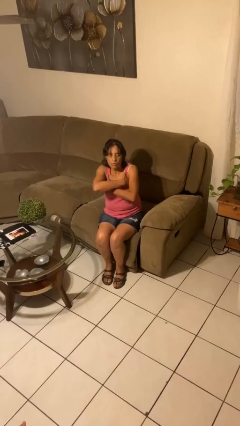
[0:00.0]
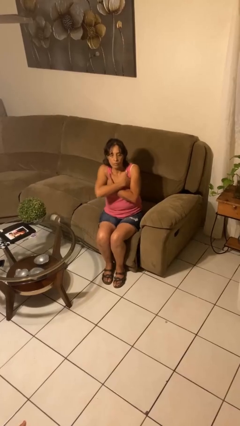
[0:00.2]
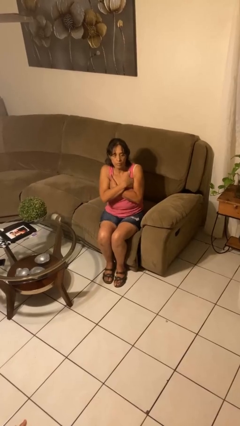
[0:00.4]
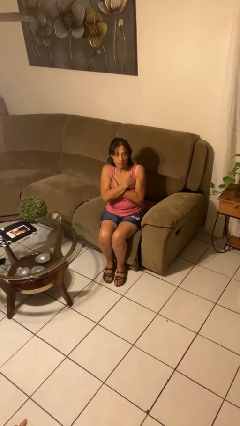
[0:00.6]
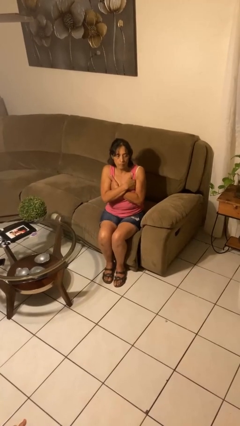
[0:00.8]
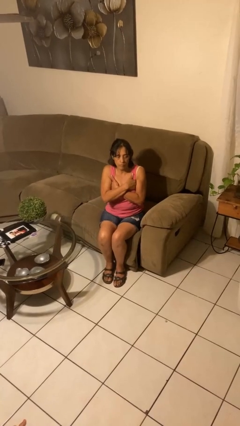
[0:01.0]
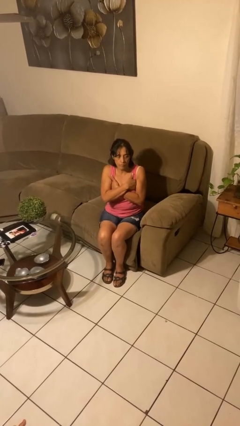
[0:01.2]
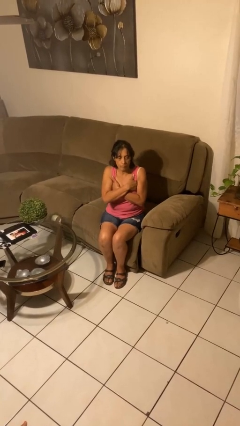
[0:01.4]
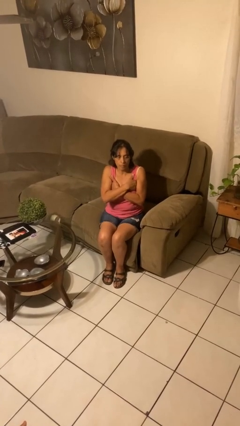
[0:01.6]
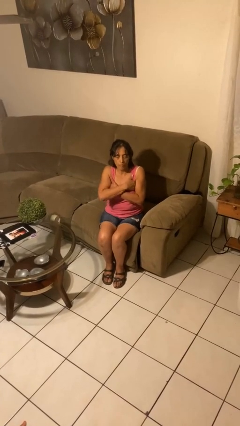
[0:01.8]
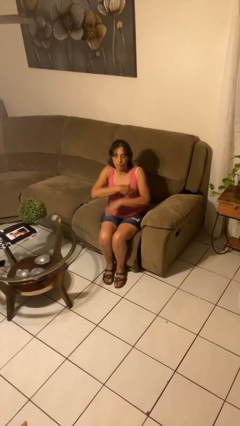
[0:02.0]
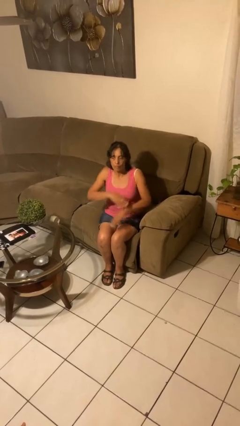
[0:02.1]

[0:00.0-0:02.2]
person gestures arms x

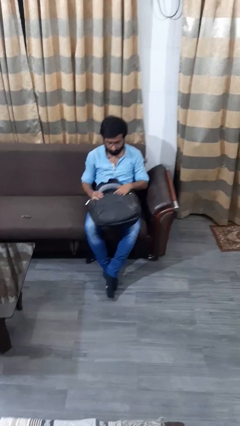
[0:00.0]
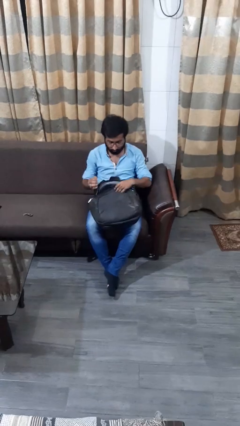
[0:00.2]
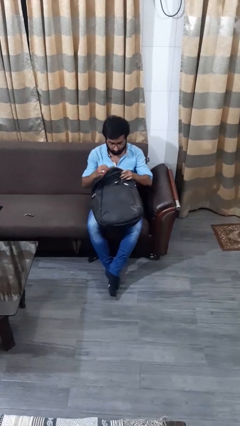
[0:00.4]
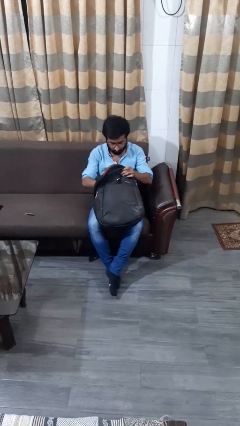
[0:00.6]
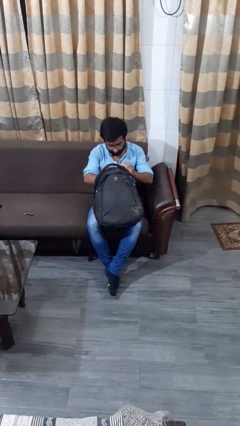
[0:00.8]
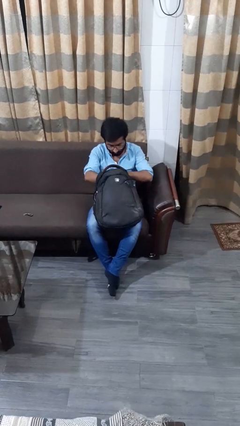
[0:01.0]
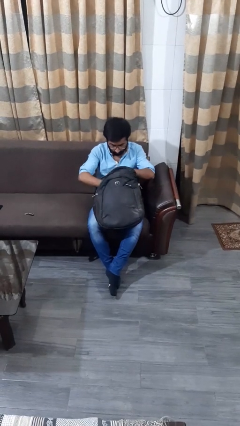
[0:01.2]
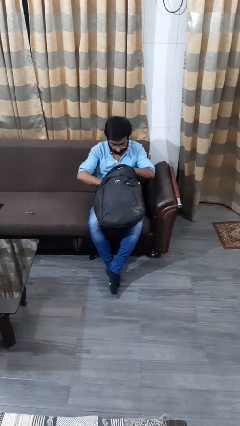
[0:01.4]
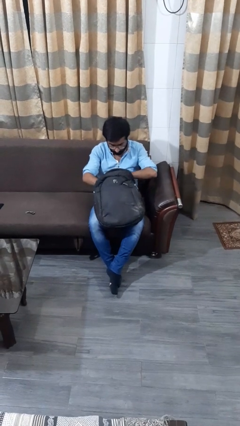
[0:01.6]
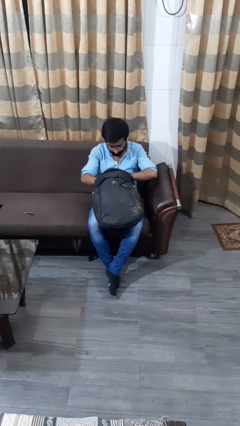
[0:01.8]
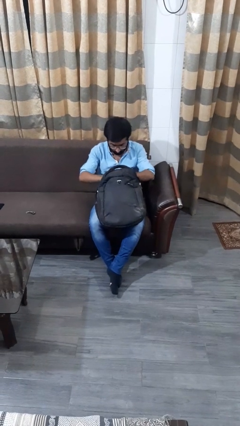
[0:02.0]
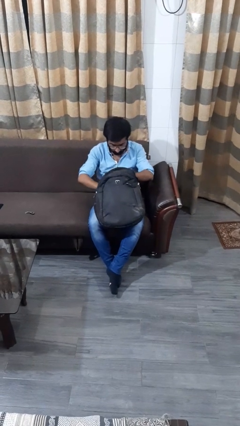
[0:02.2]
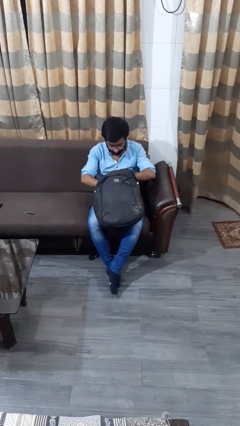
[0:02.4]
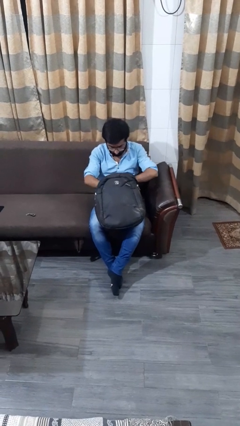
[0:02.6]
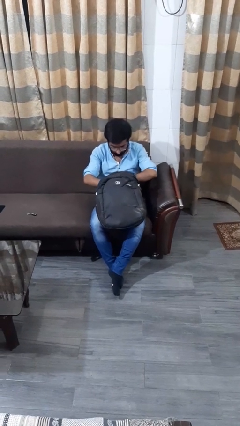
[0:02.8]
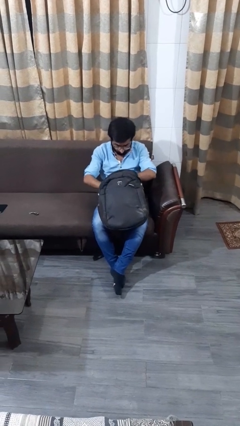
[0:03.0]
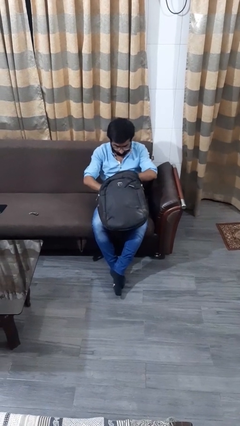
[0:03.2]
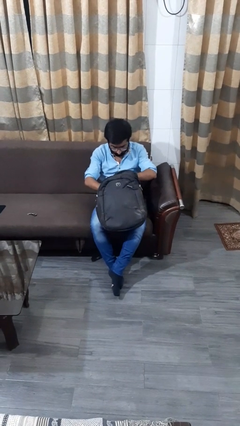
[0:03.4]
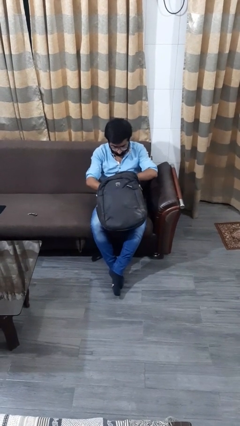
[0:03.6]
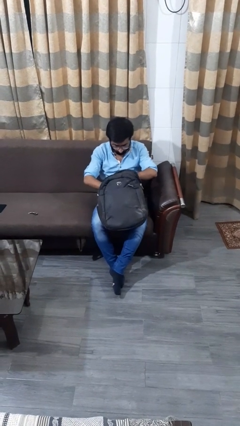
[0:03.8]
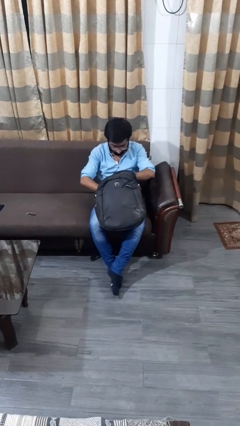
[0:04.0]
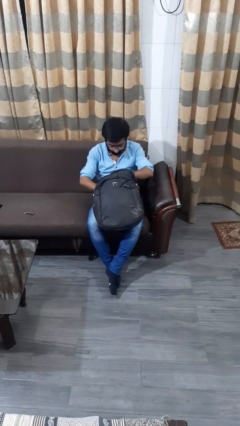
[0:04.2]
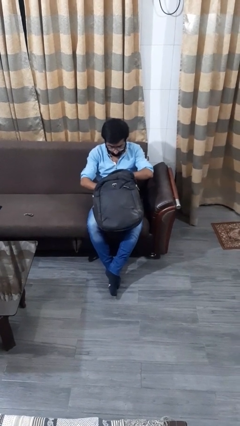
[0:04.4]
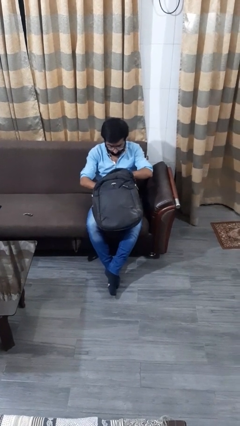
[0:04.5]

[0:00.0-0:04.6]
person searches in backpack

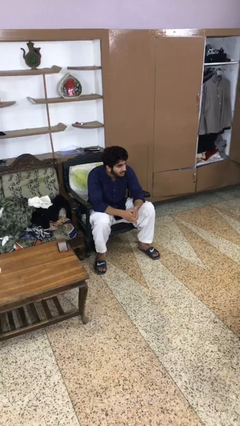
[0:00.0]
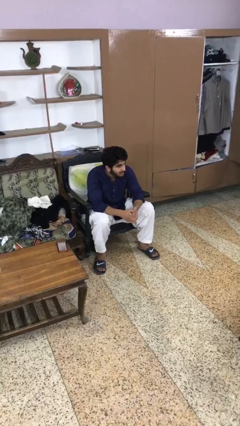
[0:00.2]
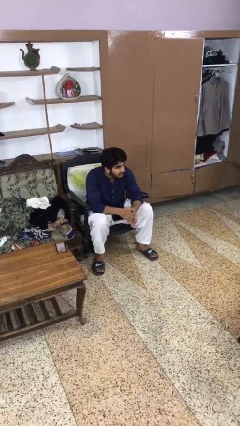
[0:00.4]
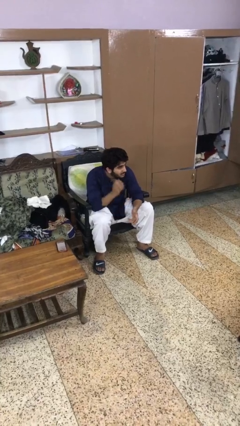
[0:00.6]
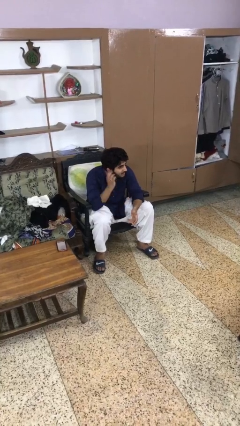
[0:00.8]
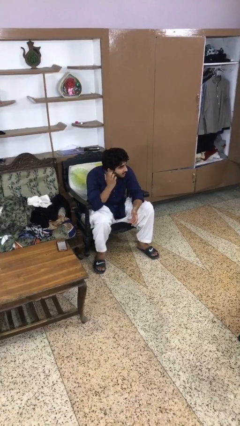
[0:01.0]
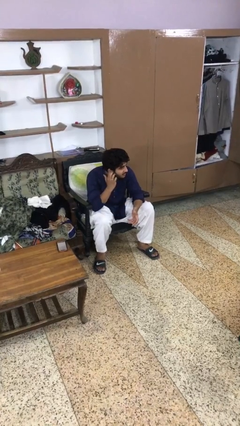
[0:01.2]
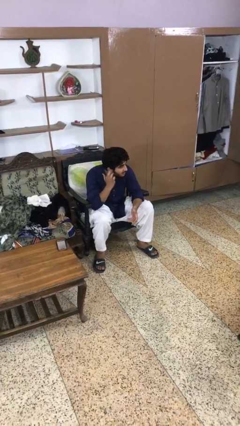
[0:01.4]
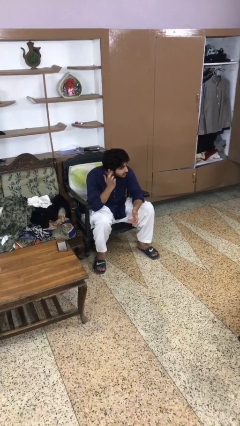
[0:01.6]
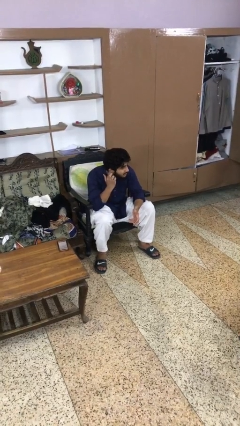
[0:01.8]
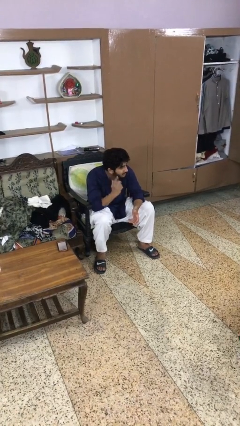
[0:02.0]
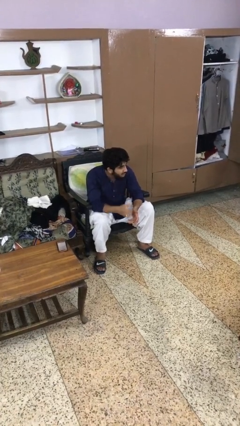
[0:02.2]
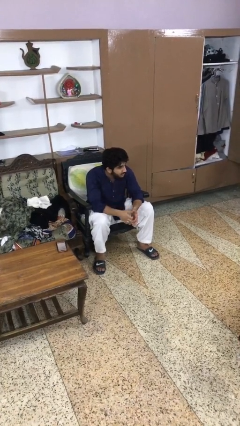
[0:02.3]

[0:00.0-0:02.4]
person puts fingers in ear

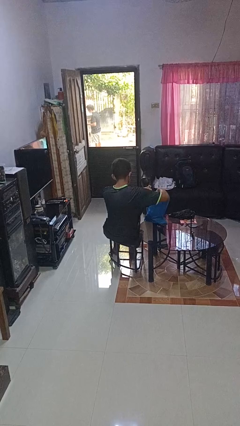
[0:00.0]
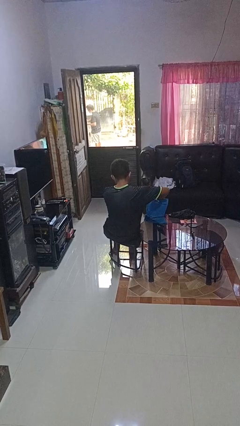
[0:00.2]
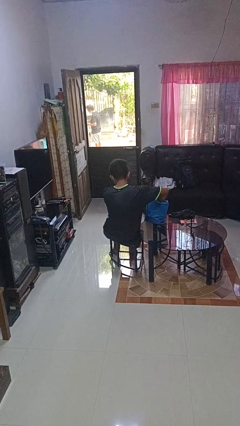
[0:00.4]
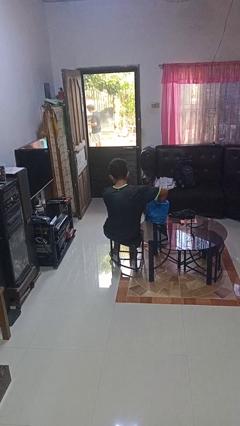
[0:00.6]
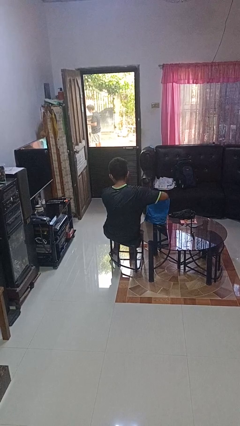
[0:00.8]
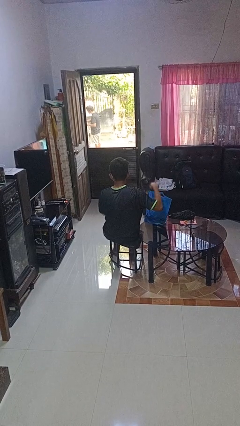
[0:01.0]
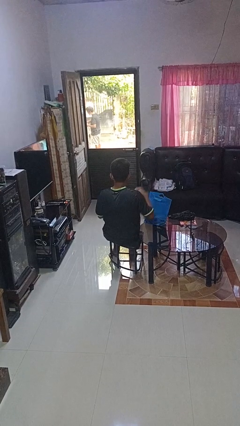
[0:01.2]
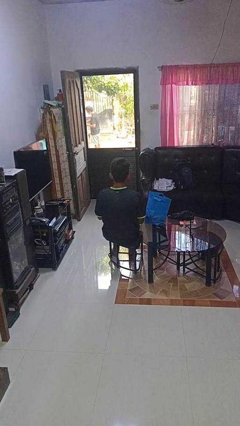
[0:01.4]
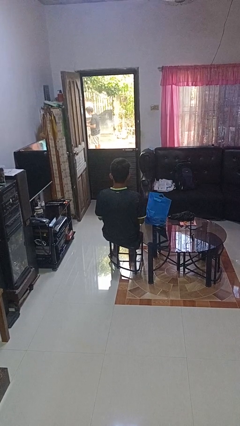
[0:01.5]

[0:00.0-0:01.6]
person puts object into bag

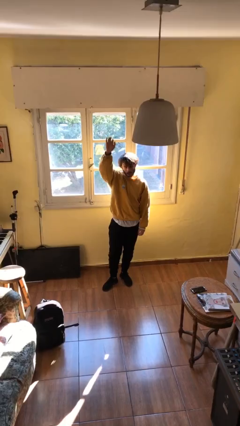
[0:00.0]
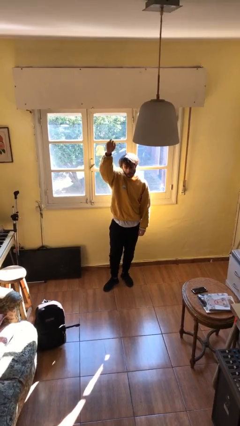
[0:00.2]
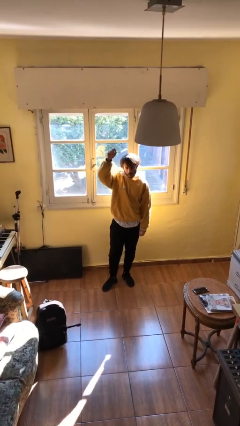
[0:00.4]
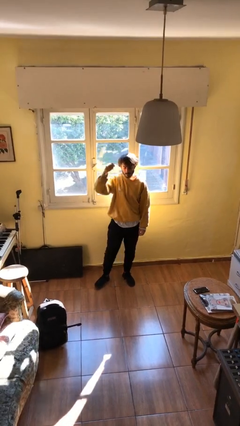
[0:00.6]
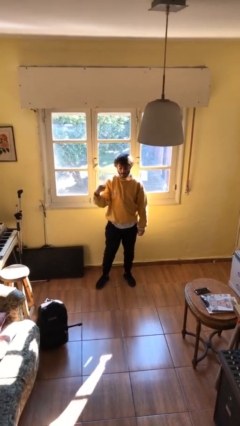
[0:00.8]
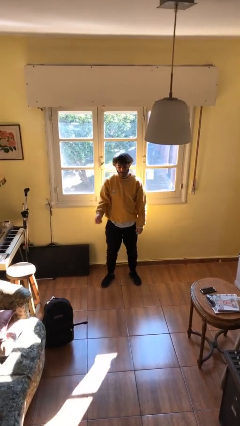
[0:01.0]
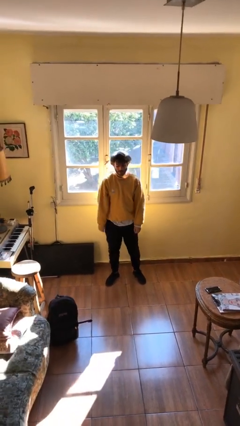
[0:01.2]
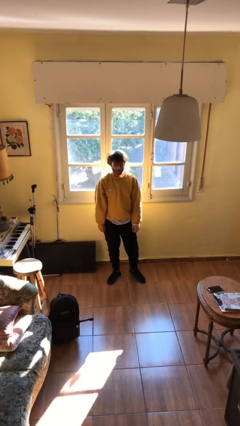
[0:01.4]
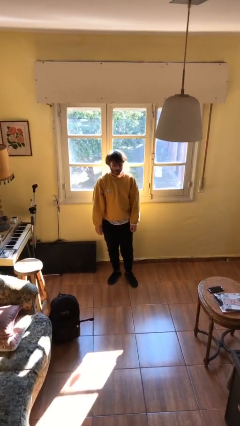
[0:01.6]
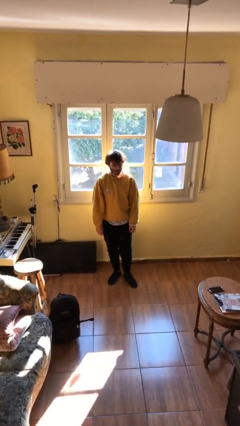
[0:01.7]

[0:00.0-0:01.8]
person gestures lower hand

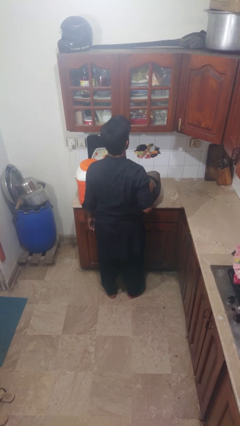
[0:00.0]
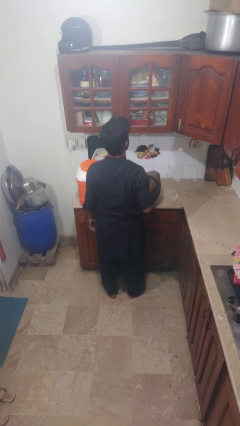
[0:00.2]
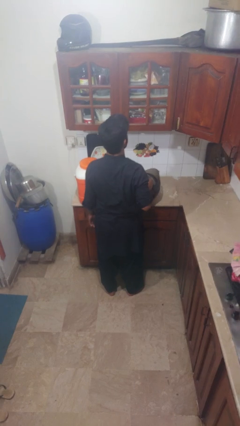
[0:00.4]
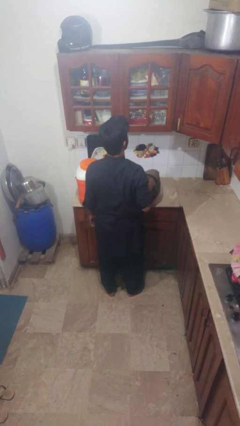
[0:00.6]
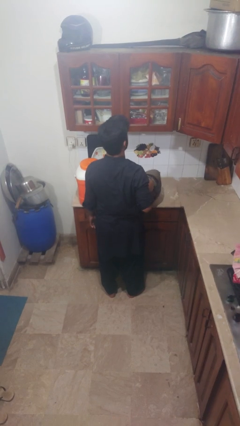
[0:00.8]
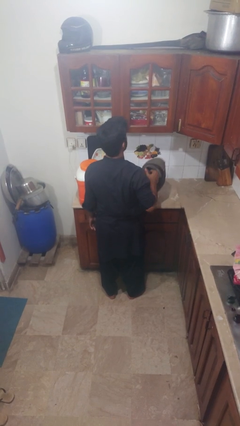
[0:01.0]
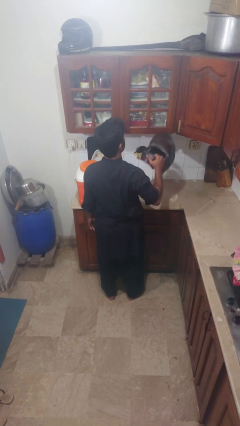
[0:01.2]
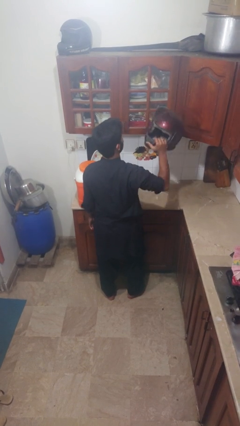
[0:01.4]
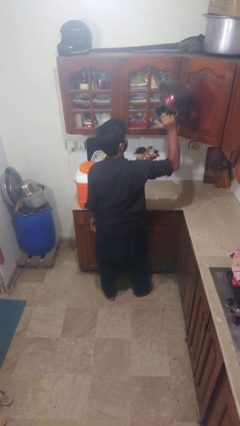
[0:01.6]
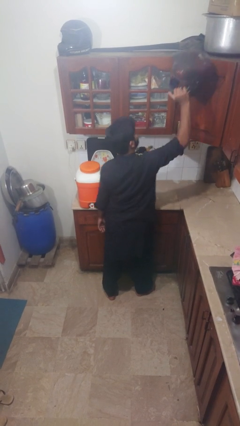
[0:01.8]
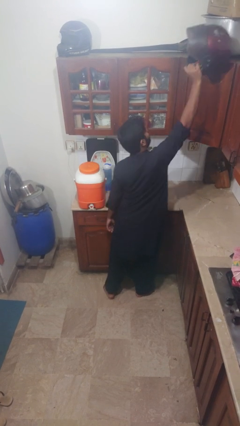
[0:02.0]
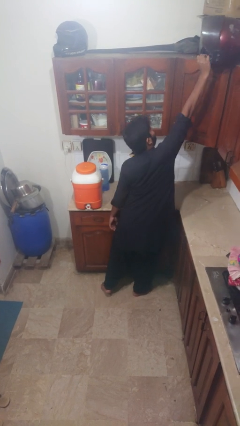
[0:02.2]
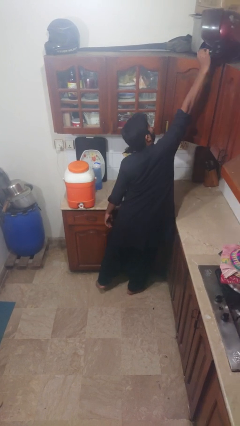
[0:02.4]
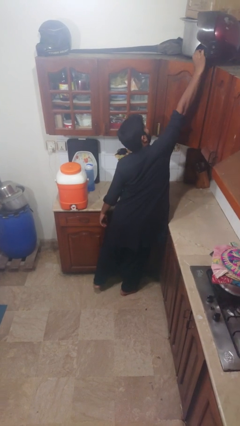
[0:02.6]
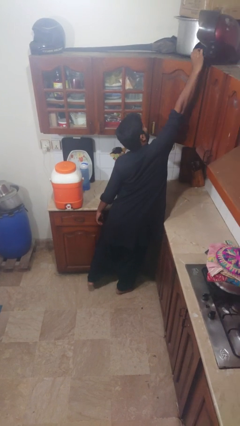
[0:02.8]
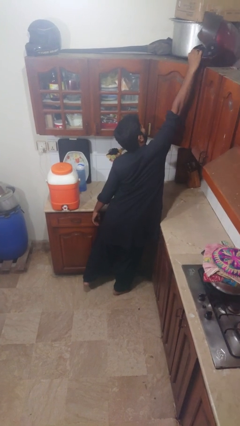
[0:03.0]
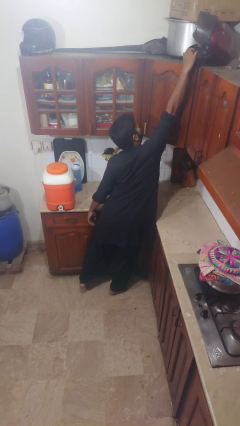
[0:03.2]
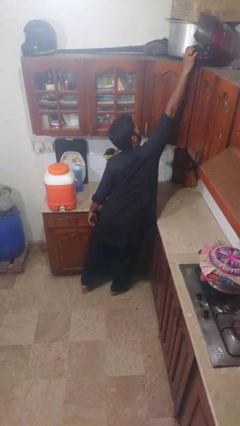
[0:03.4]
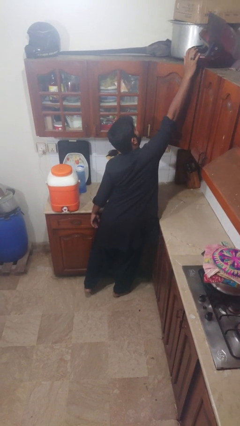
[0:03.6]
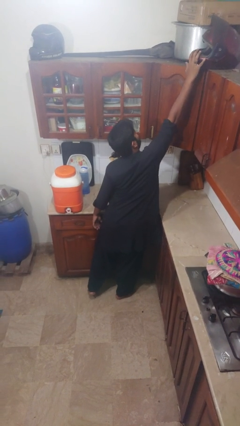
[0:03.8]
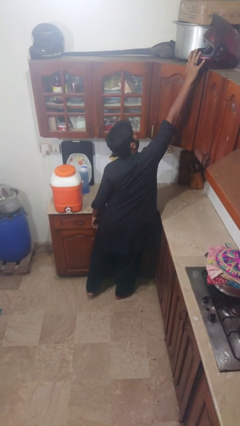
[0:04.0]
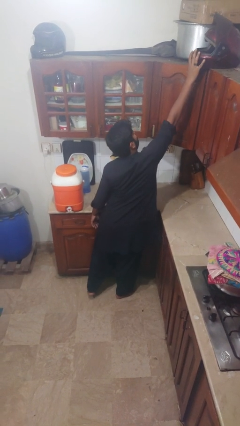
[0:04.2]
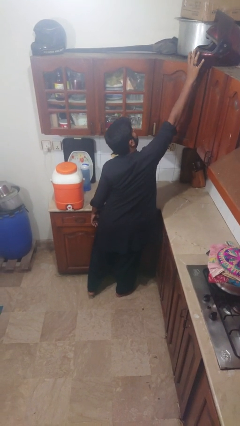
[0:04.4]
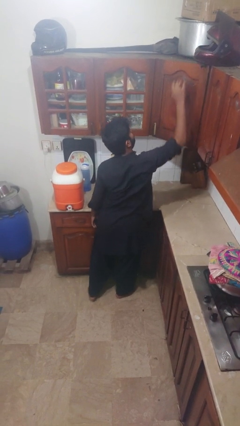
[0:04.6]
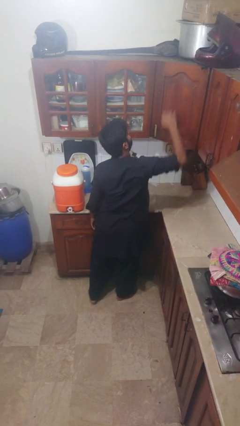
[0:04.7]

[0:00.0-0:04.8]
person puts down object on shelf
